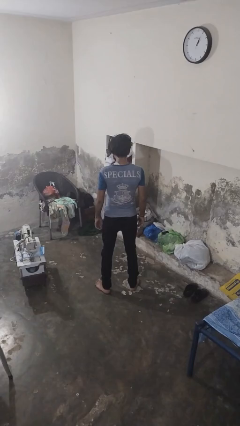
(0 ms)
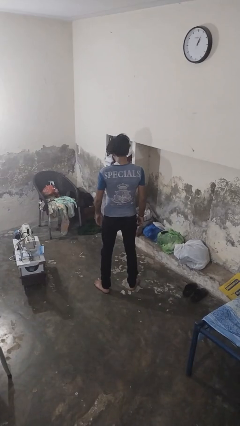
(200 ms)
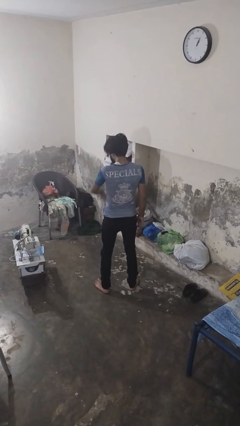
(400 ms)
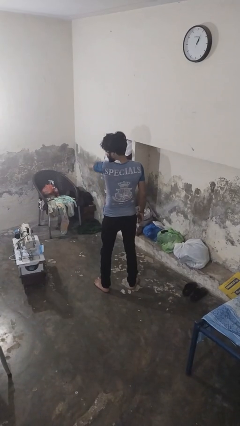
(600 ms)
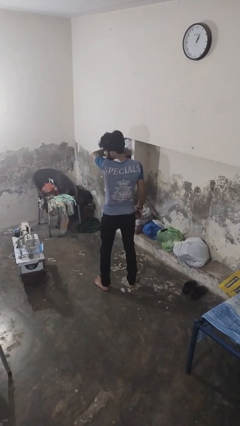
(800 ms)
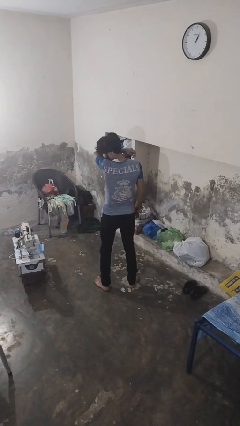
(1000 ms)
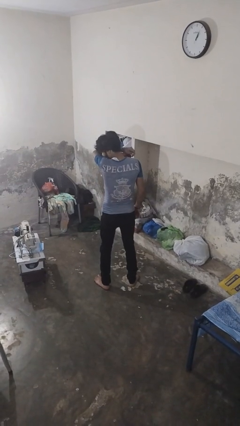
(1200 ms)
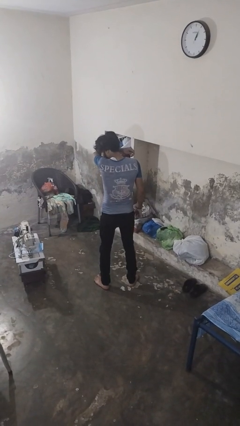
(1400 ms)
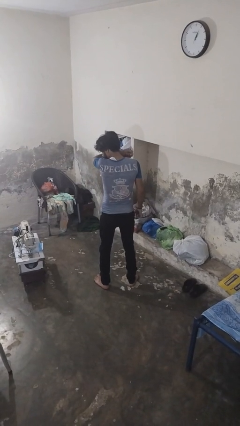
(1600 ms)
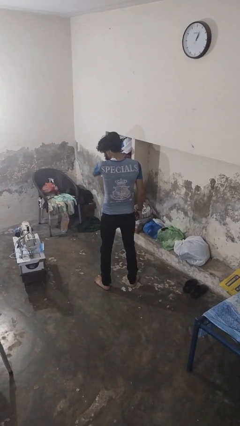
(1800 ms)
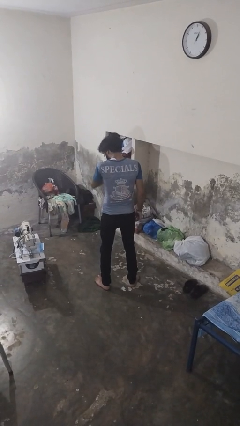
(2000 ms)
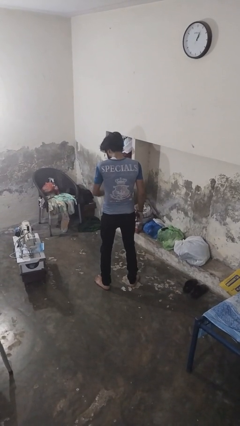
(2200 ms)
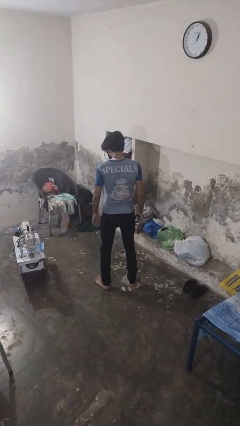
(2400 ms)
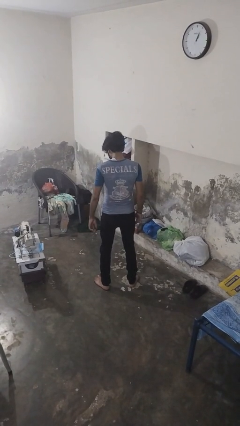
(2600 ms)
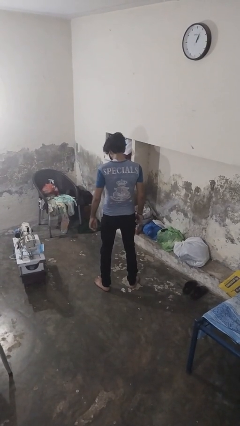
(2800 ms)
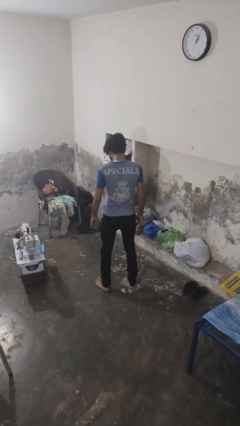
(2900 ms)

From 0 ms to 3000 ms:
person sneezes into arm

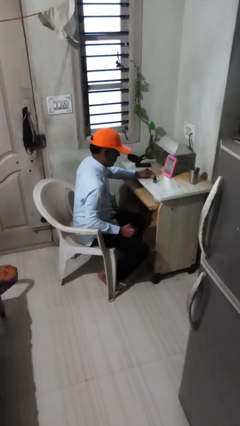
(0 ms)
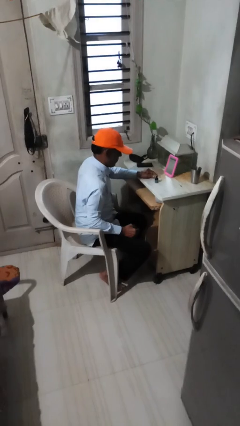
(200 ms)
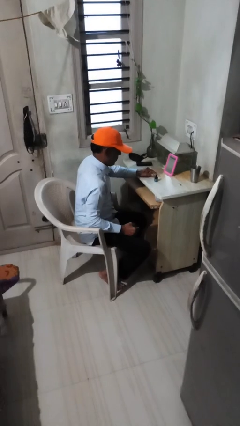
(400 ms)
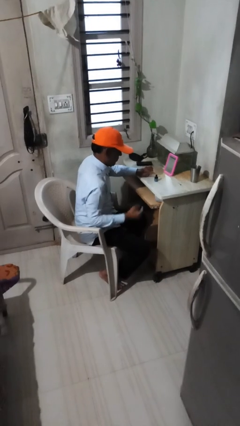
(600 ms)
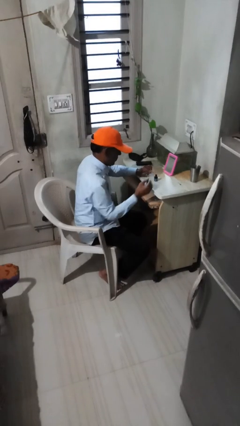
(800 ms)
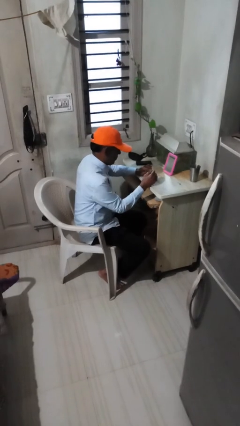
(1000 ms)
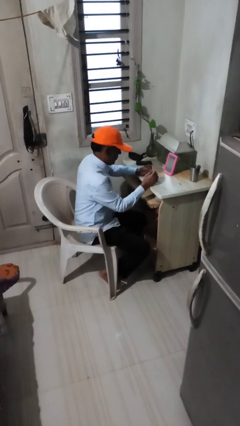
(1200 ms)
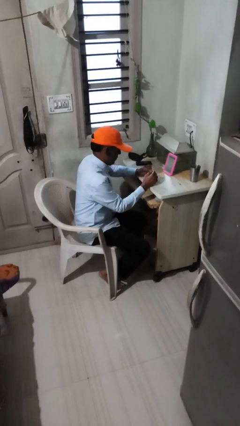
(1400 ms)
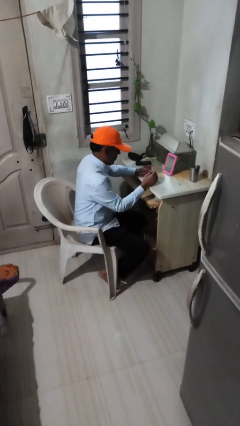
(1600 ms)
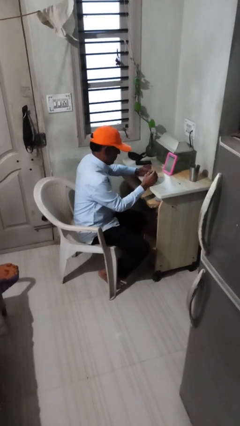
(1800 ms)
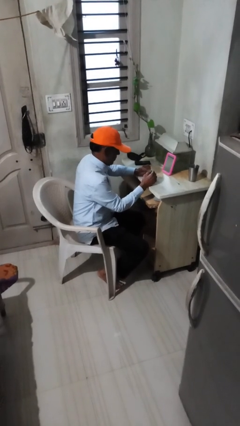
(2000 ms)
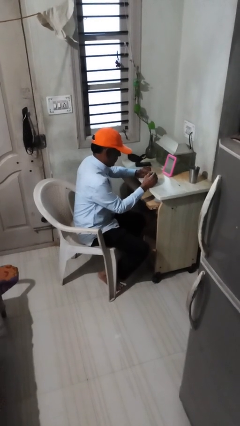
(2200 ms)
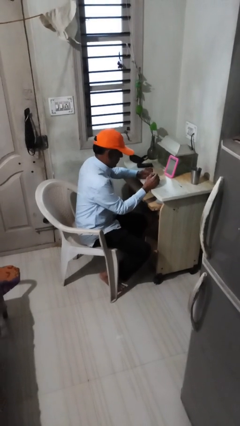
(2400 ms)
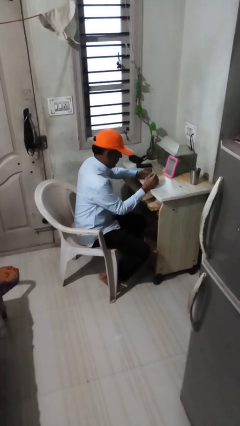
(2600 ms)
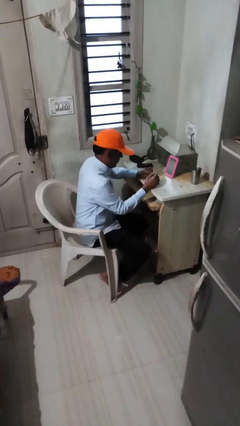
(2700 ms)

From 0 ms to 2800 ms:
person paints fingernails

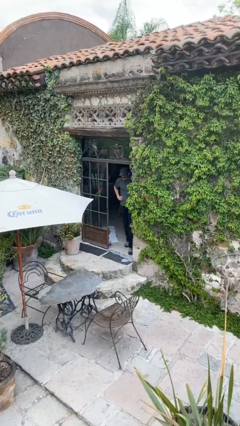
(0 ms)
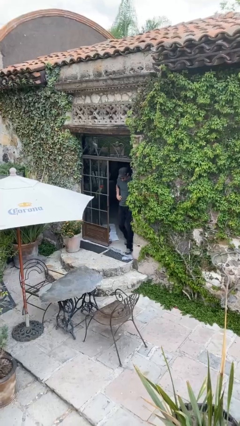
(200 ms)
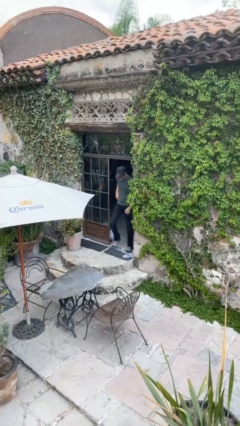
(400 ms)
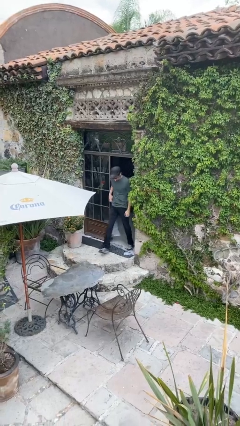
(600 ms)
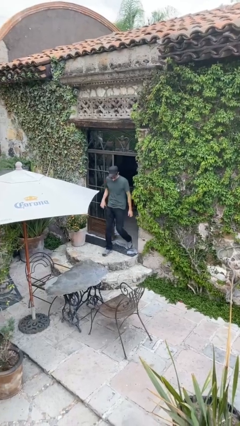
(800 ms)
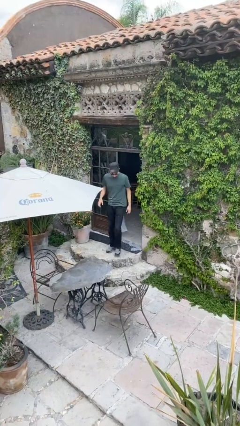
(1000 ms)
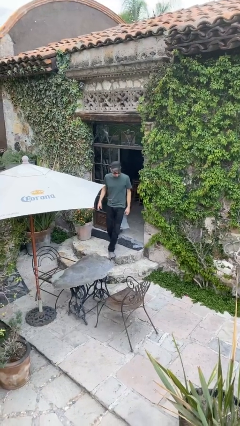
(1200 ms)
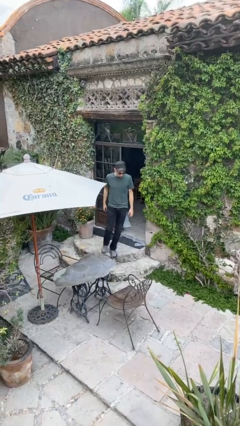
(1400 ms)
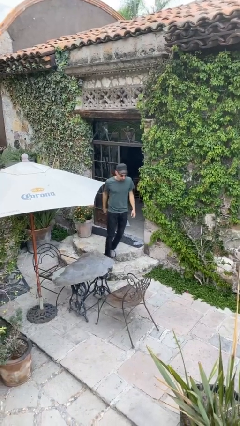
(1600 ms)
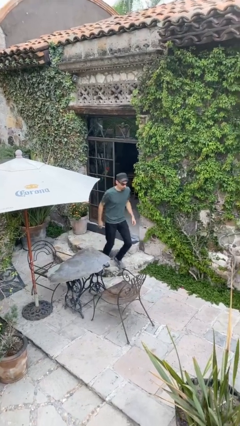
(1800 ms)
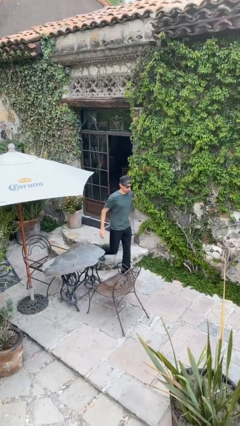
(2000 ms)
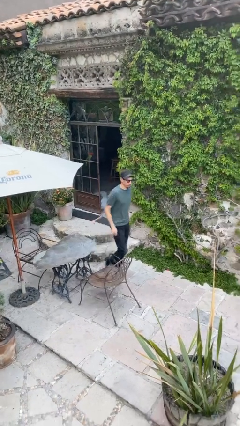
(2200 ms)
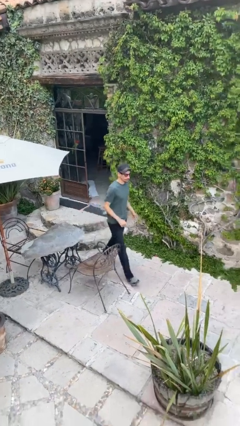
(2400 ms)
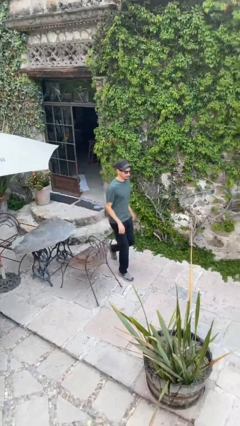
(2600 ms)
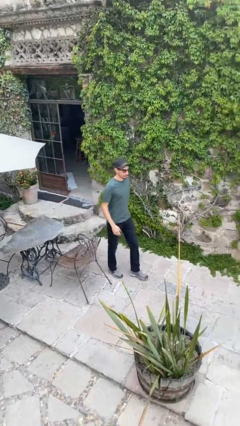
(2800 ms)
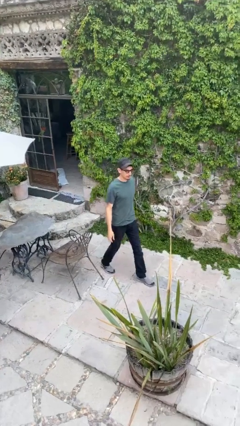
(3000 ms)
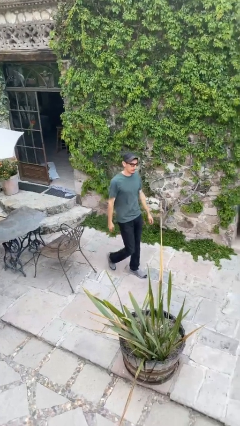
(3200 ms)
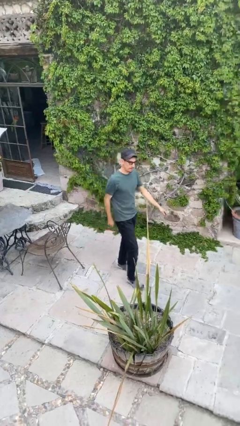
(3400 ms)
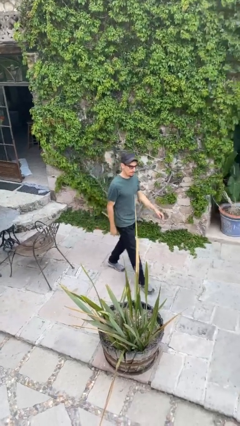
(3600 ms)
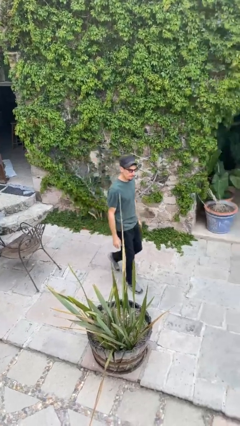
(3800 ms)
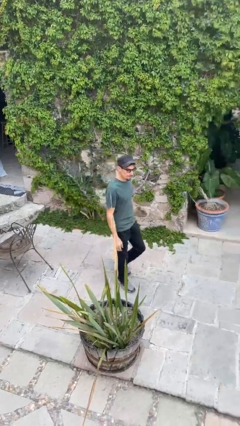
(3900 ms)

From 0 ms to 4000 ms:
person enters scene through structure

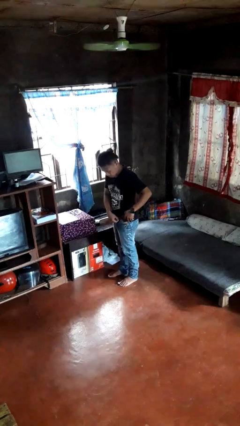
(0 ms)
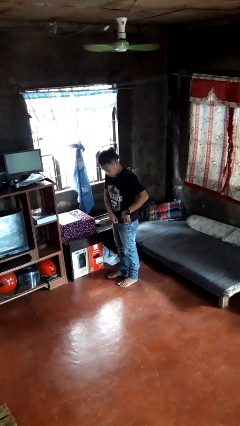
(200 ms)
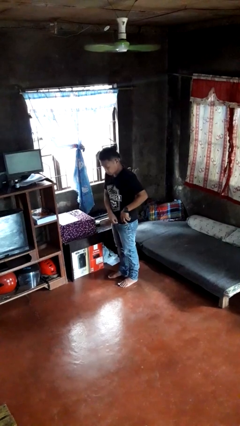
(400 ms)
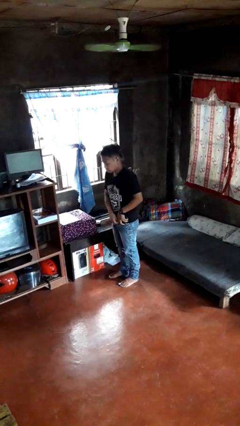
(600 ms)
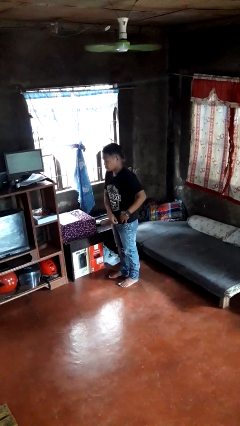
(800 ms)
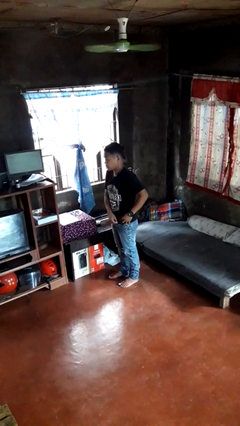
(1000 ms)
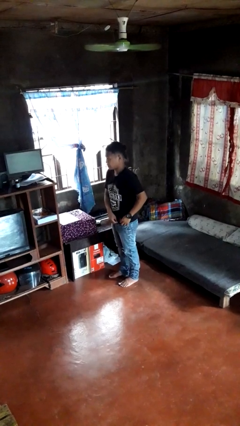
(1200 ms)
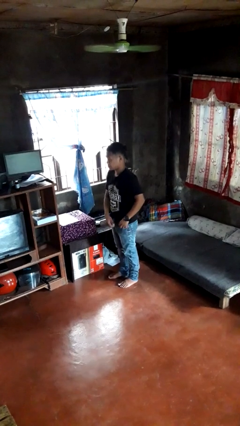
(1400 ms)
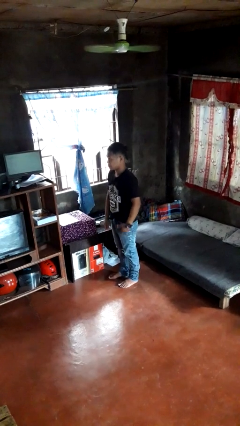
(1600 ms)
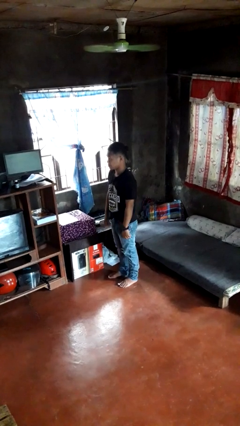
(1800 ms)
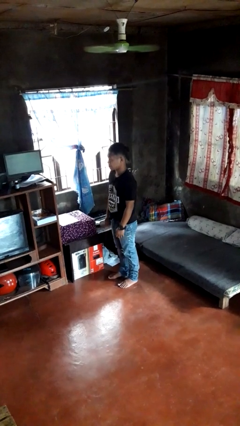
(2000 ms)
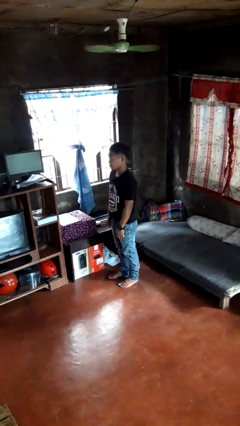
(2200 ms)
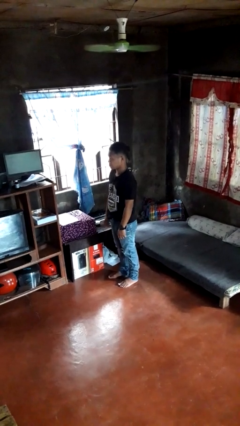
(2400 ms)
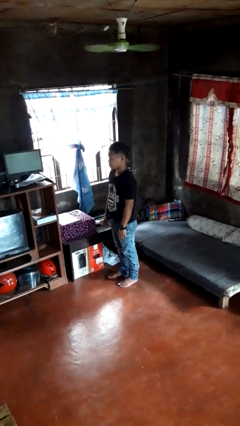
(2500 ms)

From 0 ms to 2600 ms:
person puts phone into pocket

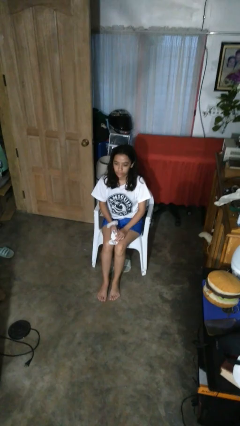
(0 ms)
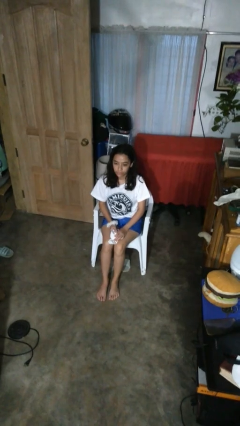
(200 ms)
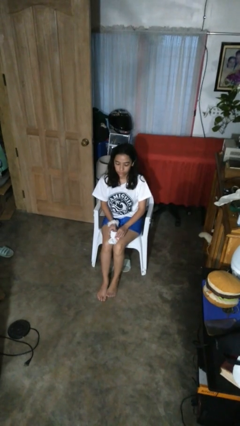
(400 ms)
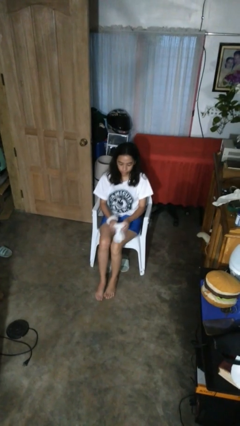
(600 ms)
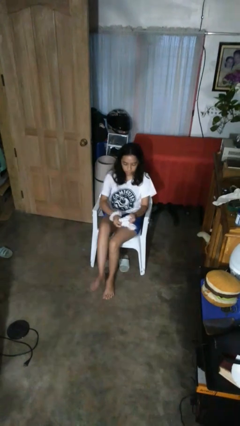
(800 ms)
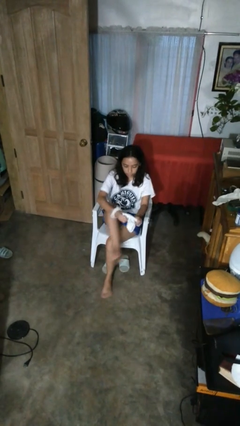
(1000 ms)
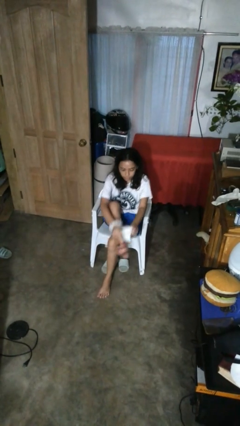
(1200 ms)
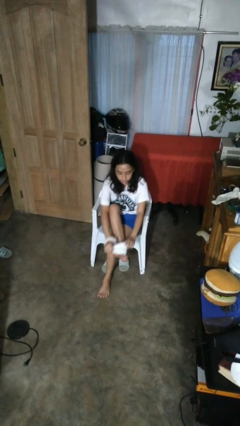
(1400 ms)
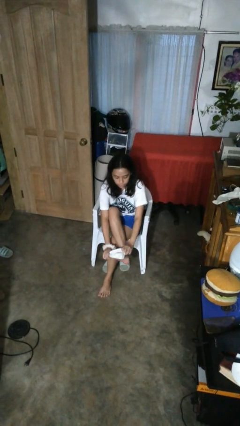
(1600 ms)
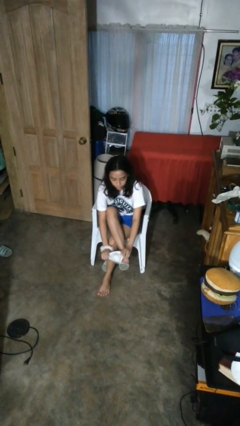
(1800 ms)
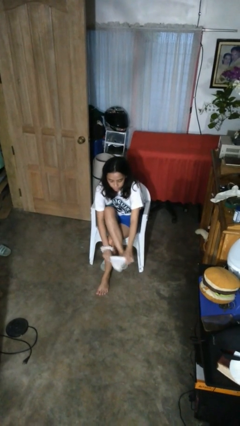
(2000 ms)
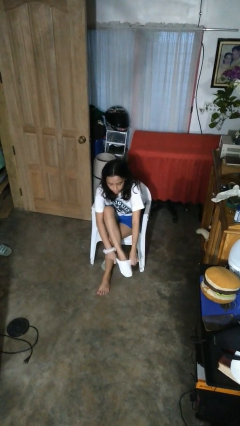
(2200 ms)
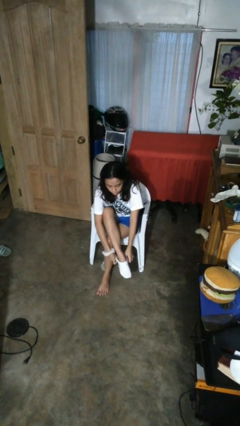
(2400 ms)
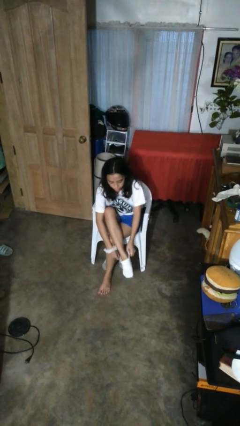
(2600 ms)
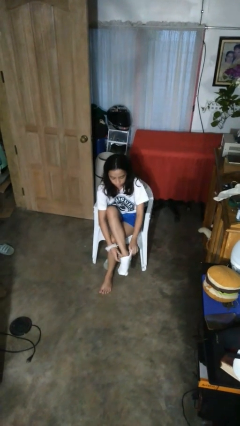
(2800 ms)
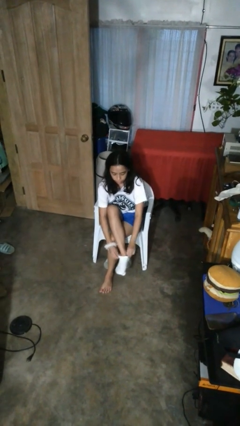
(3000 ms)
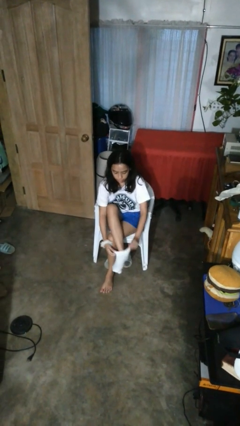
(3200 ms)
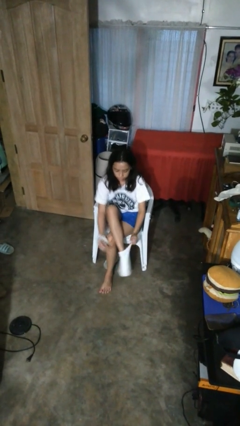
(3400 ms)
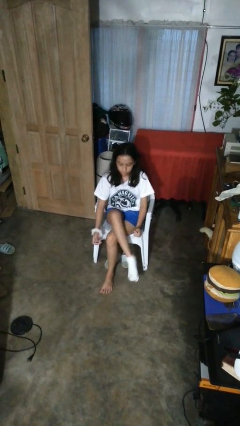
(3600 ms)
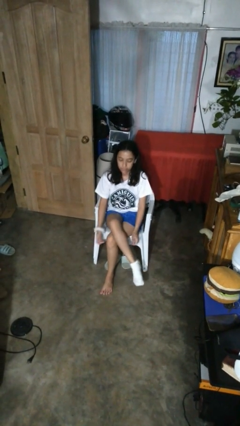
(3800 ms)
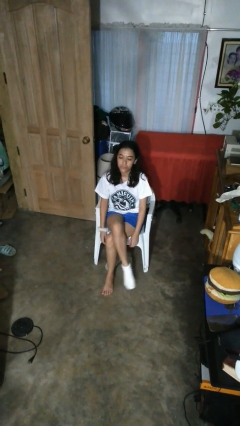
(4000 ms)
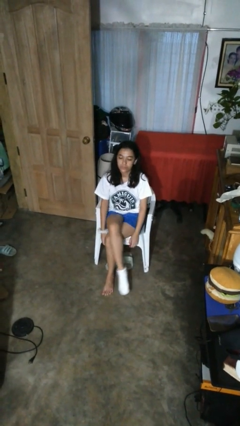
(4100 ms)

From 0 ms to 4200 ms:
person puts on socks

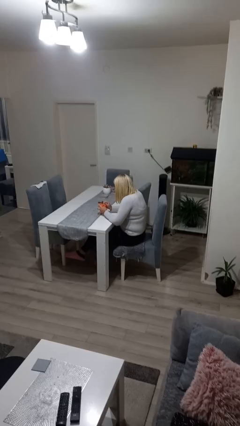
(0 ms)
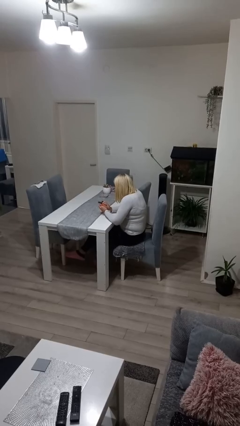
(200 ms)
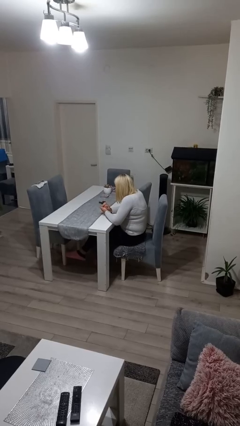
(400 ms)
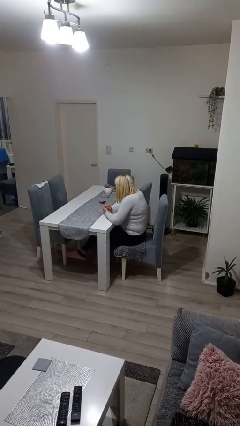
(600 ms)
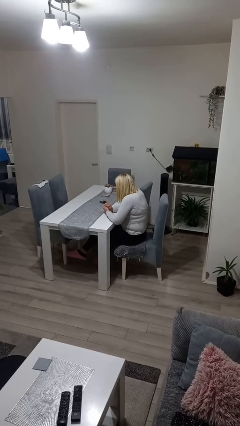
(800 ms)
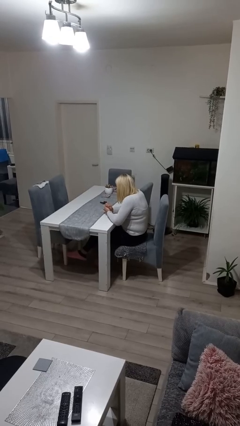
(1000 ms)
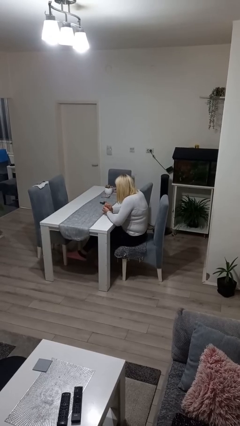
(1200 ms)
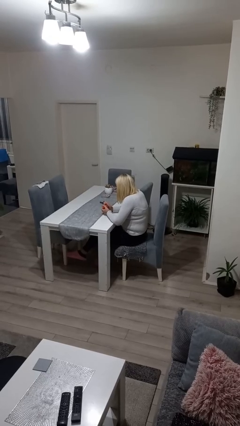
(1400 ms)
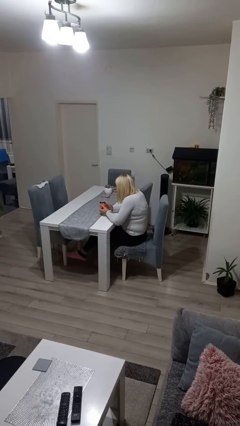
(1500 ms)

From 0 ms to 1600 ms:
person crumples paper
